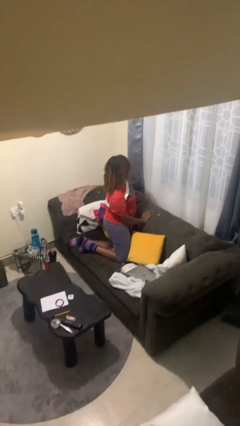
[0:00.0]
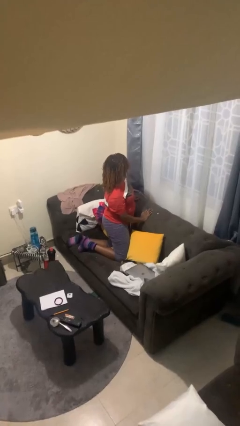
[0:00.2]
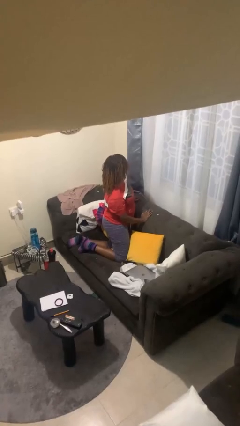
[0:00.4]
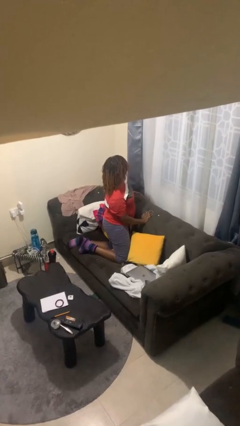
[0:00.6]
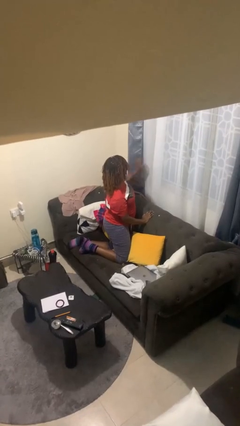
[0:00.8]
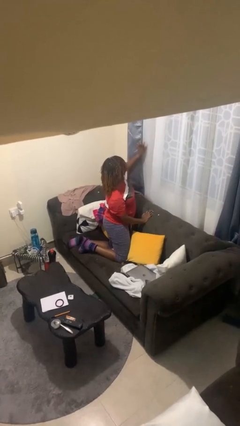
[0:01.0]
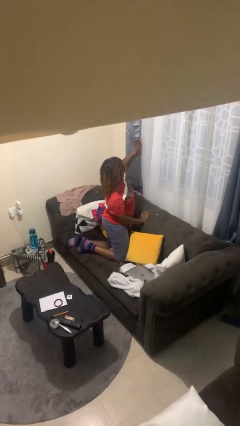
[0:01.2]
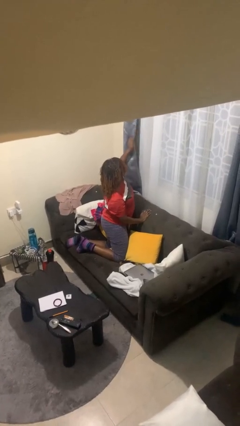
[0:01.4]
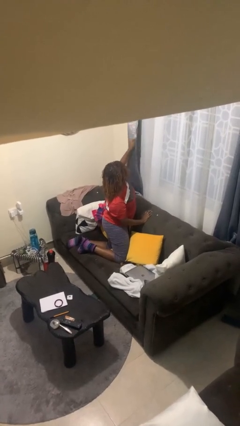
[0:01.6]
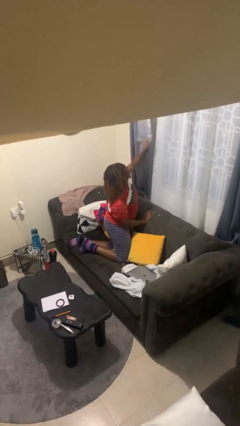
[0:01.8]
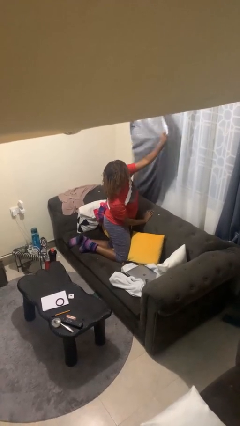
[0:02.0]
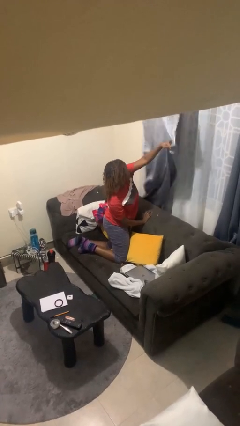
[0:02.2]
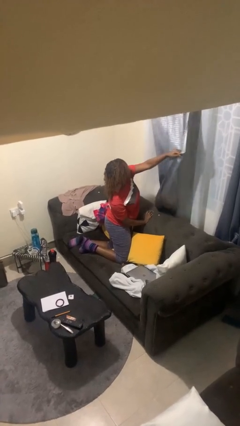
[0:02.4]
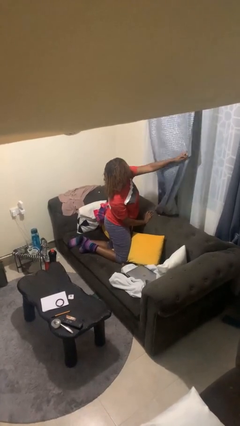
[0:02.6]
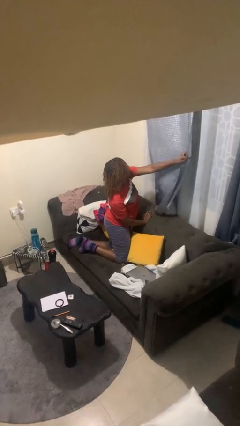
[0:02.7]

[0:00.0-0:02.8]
person closes curtains

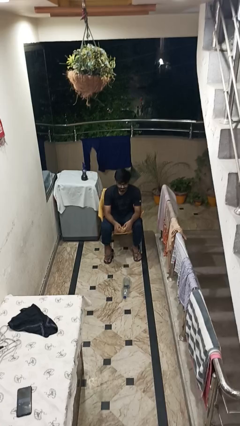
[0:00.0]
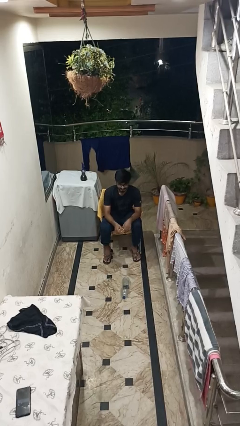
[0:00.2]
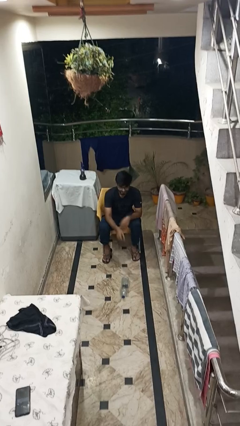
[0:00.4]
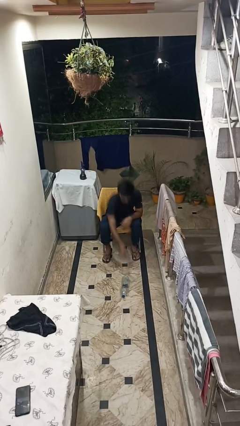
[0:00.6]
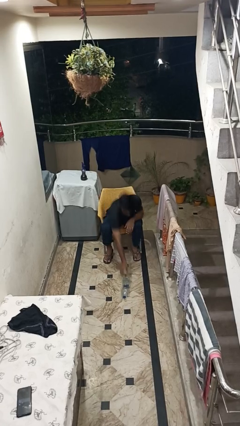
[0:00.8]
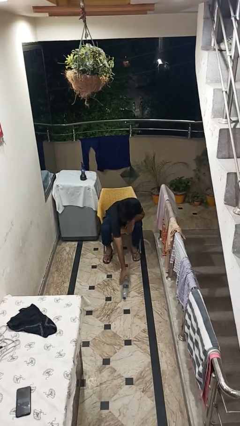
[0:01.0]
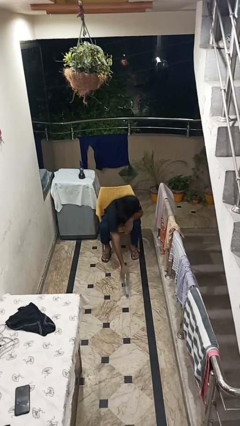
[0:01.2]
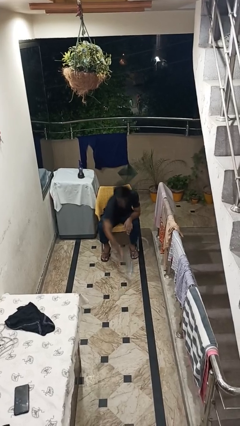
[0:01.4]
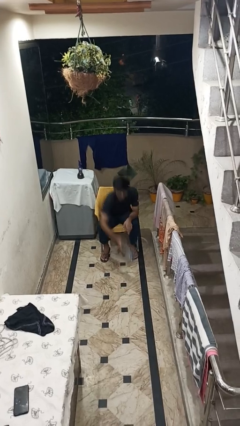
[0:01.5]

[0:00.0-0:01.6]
person picks up object from floor

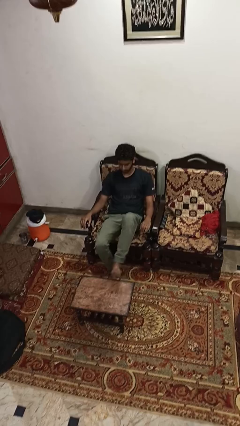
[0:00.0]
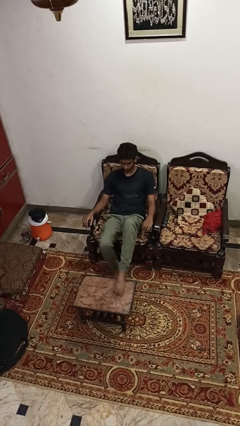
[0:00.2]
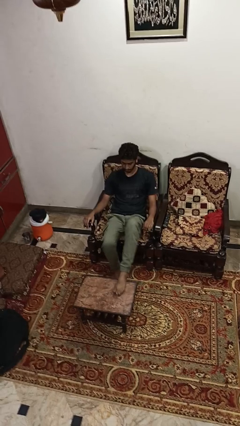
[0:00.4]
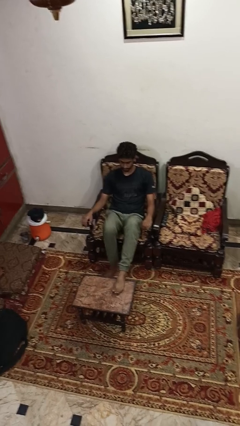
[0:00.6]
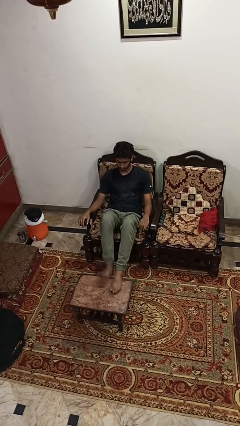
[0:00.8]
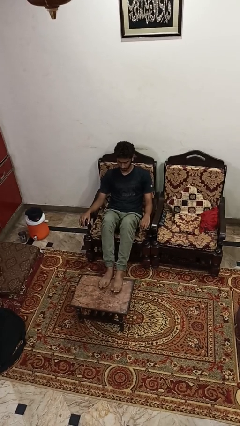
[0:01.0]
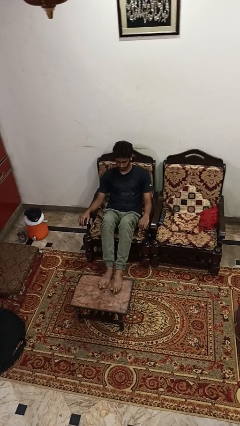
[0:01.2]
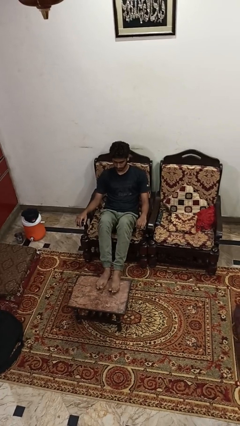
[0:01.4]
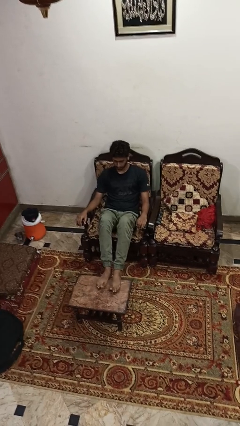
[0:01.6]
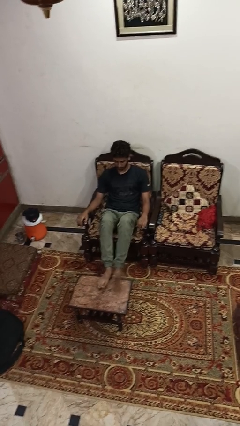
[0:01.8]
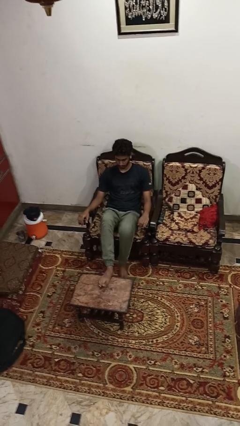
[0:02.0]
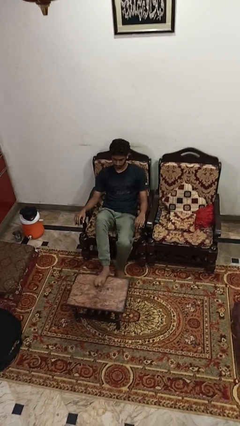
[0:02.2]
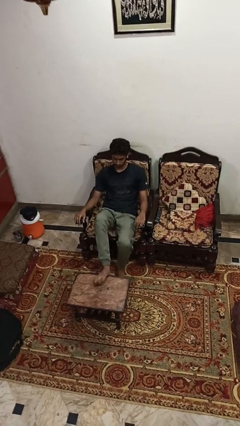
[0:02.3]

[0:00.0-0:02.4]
person puts feet up

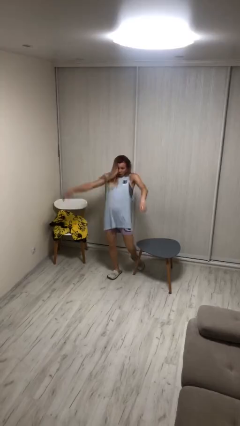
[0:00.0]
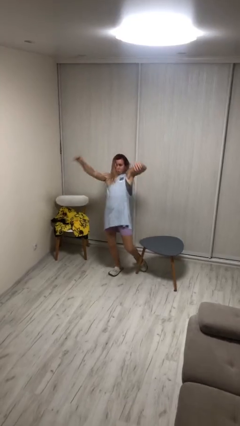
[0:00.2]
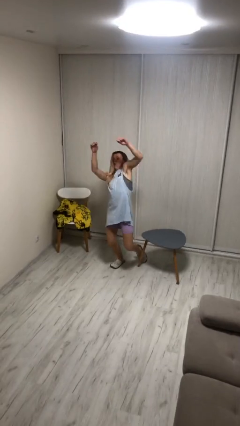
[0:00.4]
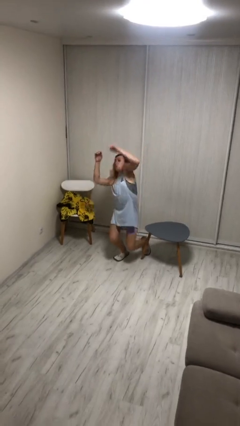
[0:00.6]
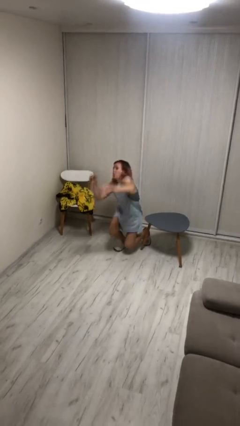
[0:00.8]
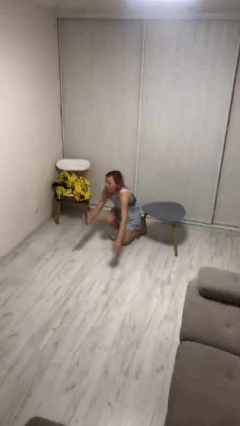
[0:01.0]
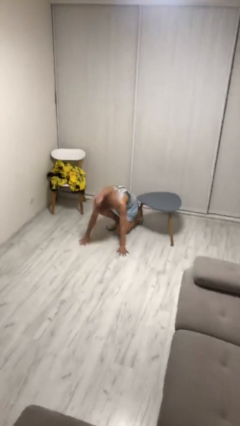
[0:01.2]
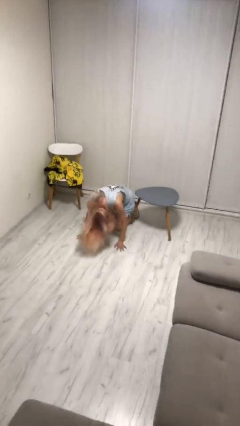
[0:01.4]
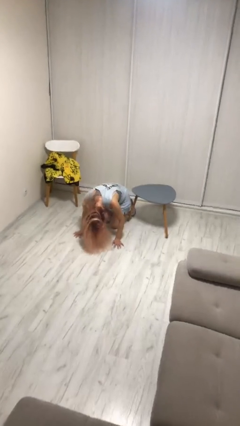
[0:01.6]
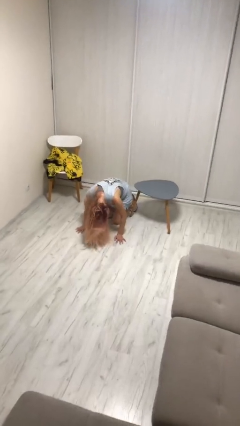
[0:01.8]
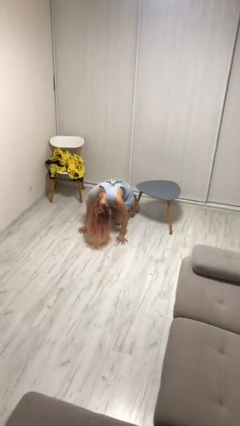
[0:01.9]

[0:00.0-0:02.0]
person trips on object on floor

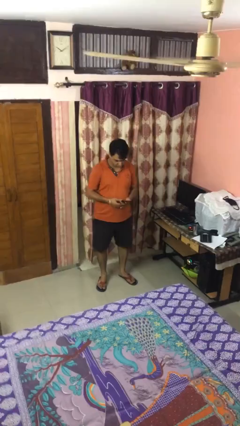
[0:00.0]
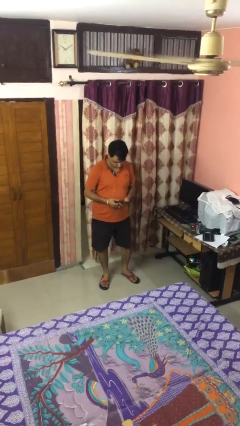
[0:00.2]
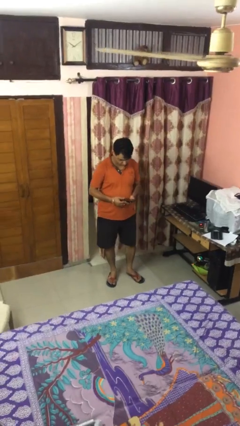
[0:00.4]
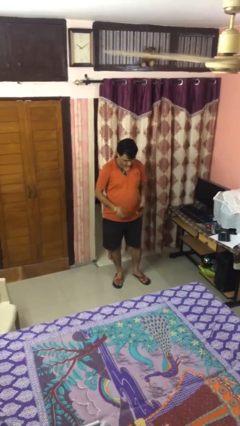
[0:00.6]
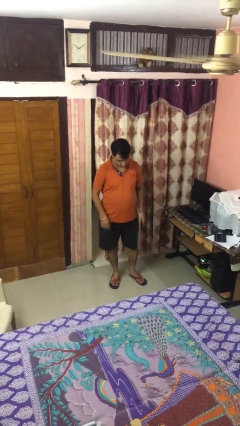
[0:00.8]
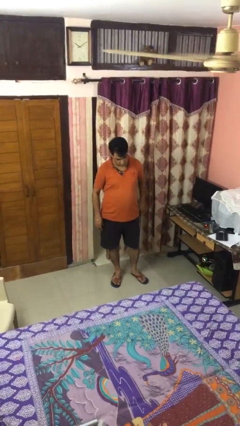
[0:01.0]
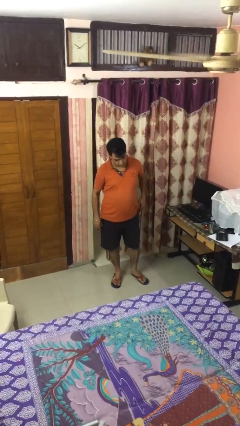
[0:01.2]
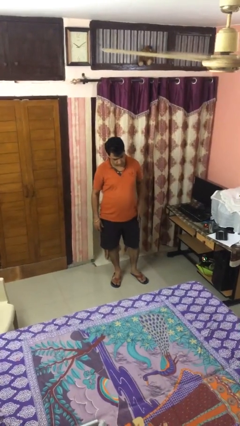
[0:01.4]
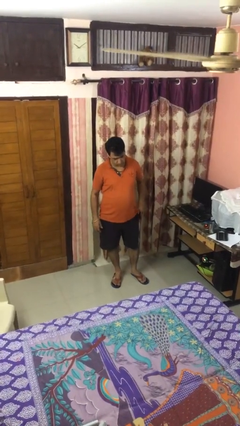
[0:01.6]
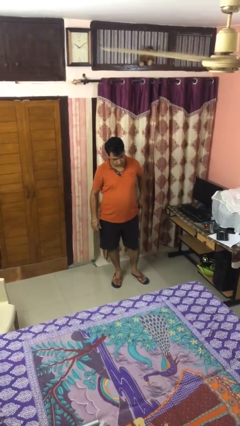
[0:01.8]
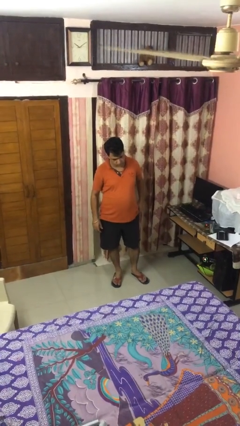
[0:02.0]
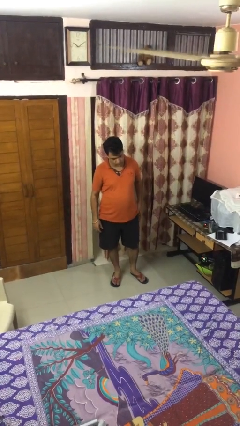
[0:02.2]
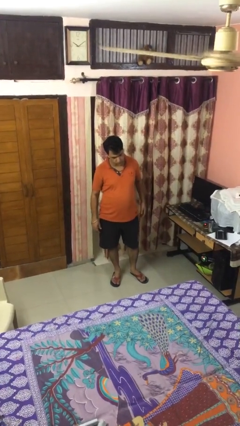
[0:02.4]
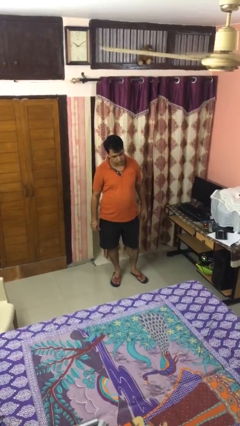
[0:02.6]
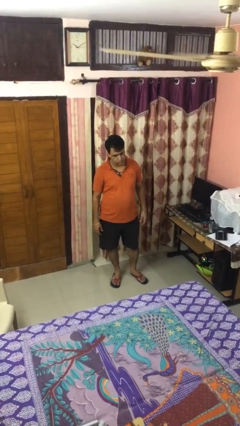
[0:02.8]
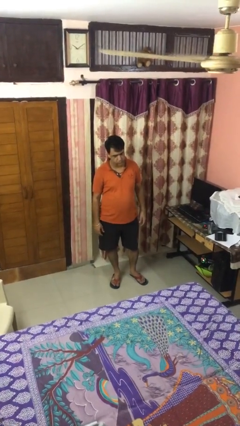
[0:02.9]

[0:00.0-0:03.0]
person puts phone into pocket

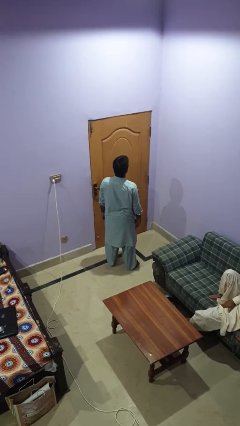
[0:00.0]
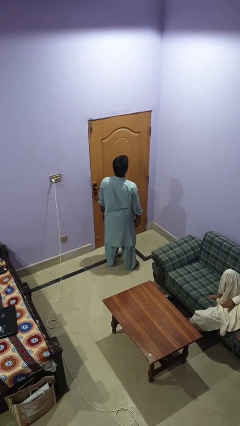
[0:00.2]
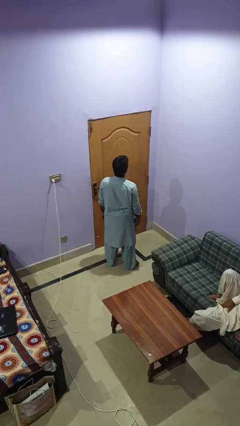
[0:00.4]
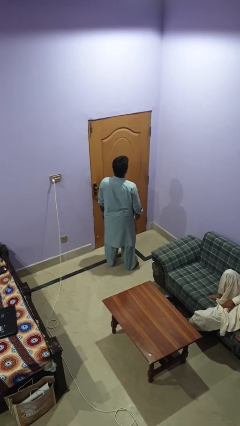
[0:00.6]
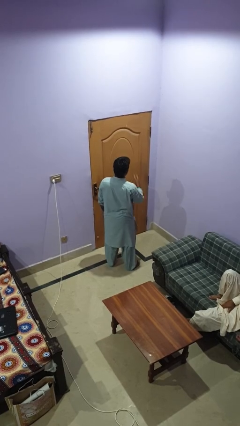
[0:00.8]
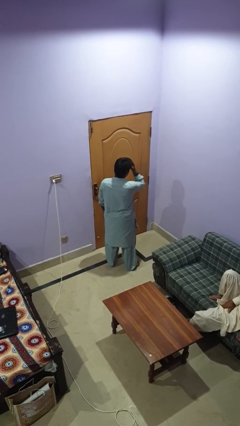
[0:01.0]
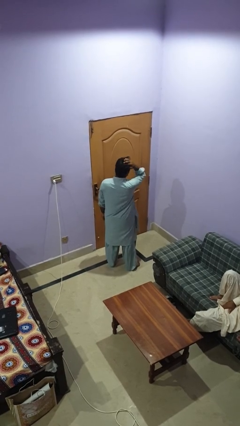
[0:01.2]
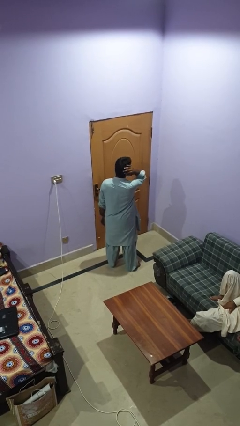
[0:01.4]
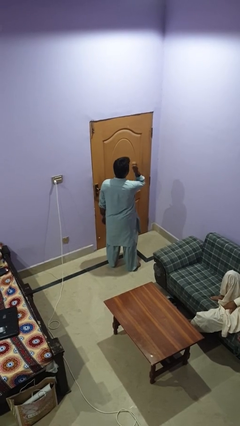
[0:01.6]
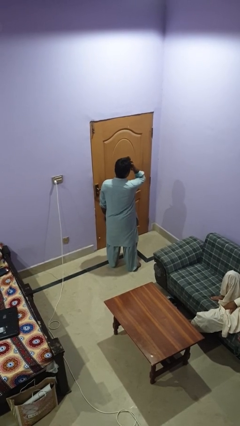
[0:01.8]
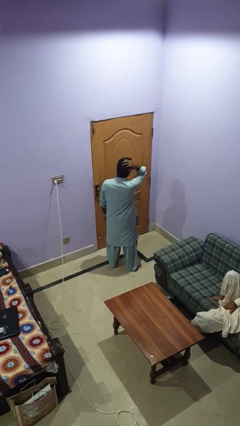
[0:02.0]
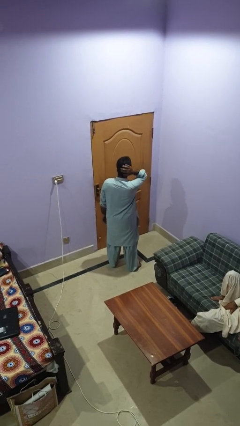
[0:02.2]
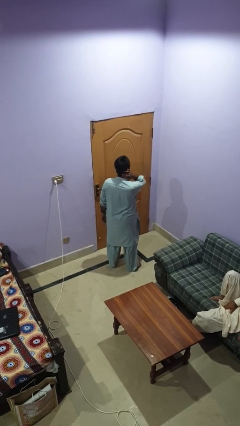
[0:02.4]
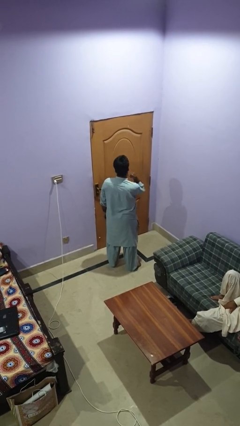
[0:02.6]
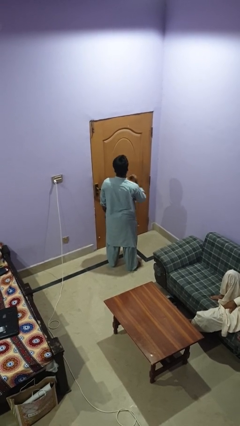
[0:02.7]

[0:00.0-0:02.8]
person strokes hair

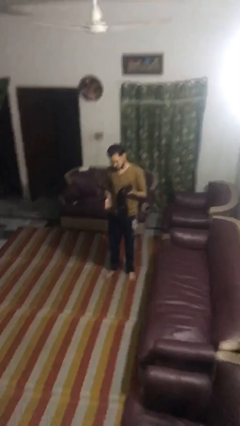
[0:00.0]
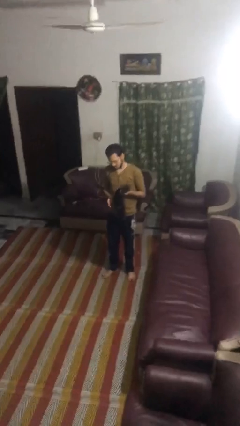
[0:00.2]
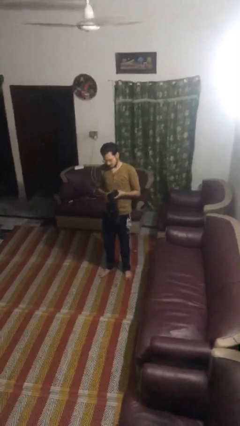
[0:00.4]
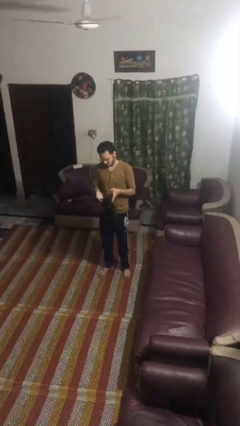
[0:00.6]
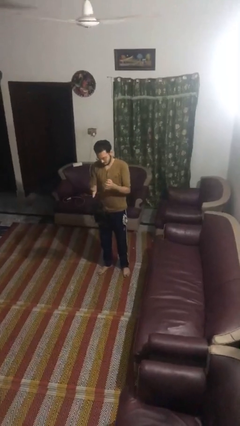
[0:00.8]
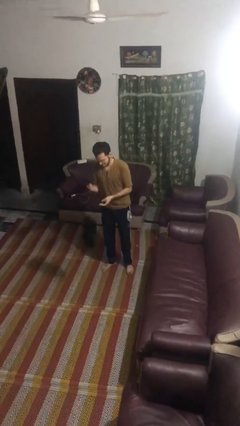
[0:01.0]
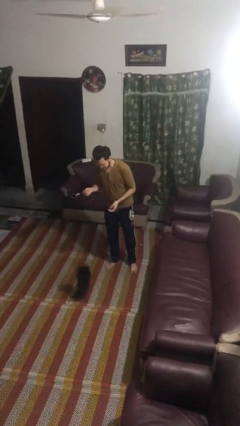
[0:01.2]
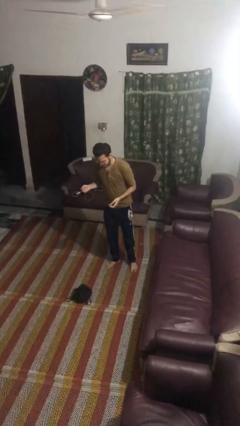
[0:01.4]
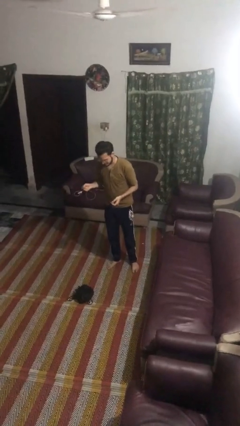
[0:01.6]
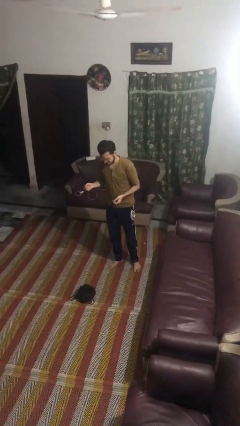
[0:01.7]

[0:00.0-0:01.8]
person drops object

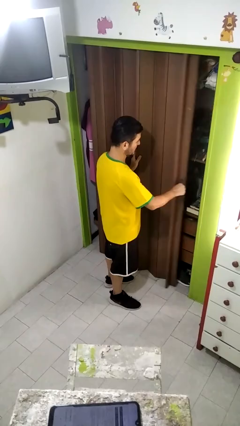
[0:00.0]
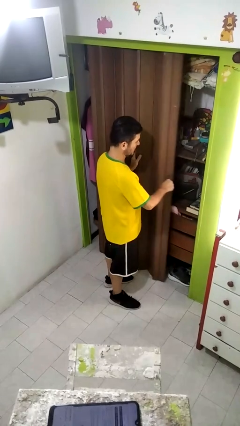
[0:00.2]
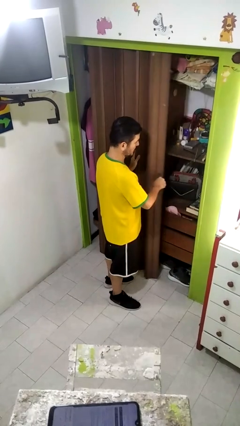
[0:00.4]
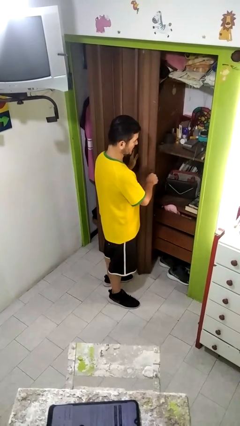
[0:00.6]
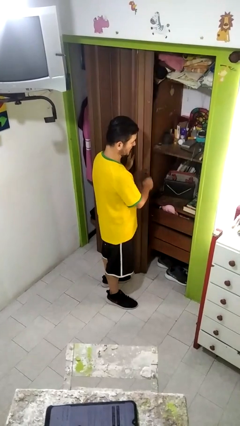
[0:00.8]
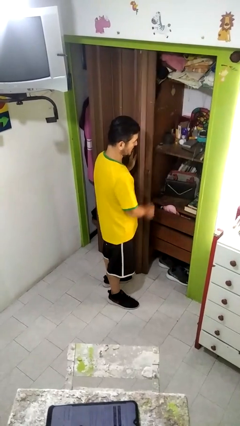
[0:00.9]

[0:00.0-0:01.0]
person opens closet door
